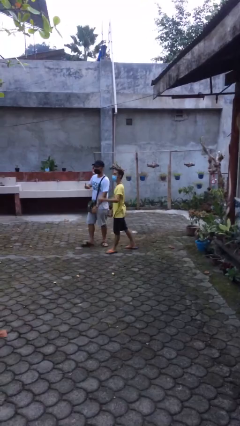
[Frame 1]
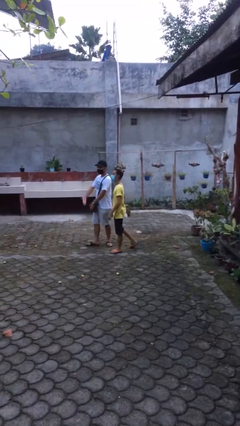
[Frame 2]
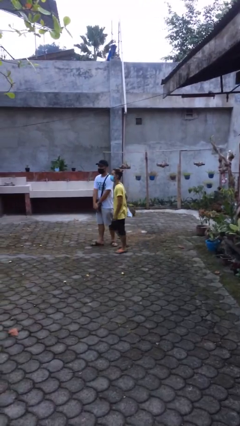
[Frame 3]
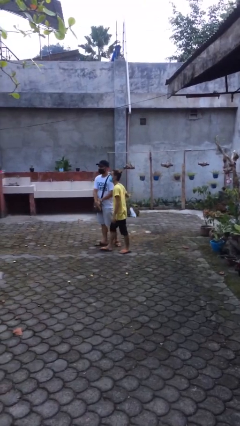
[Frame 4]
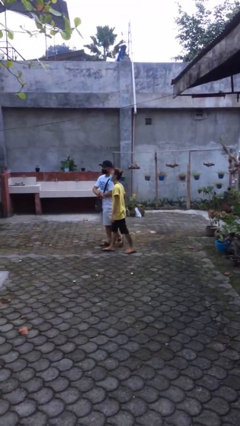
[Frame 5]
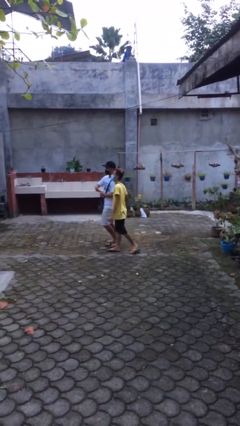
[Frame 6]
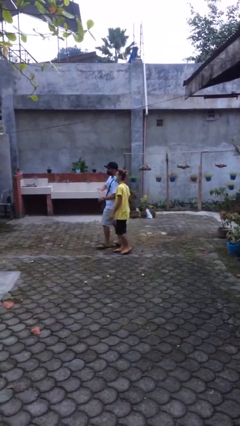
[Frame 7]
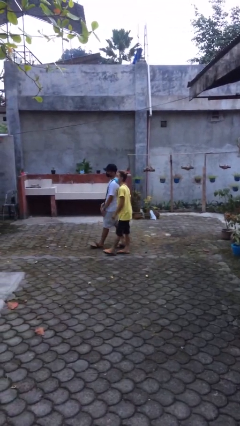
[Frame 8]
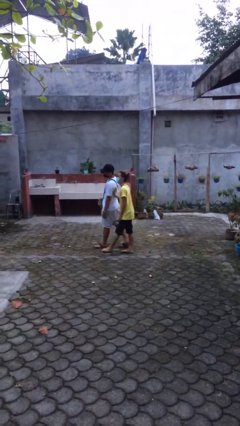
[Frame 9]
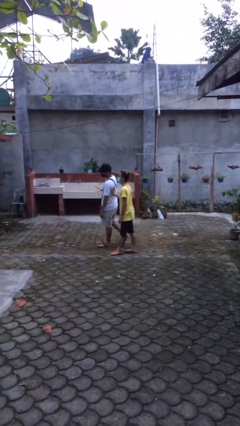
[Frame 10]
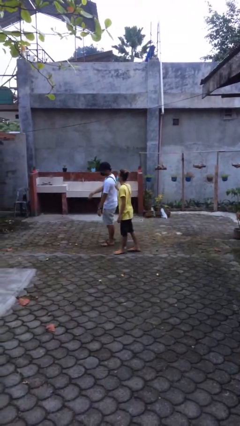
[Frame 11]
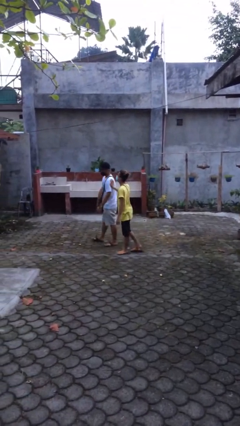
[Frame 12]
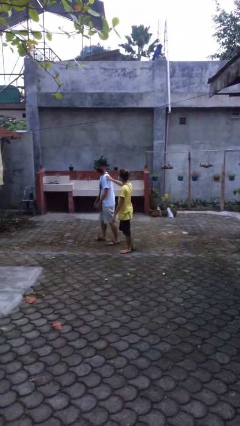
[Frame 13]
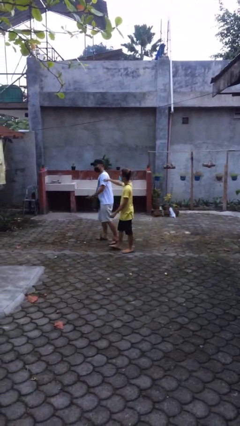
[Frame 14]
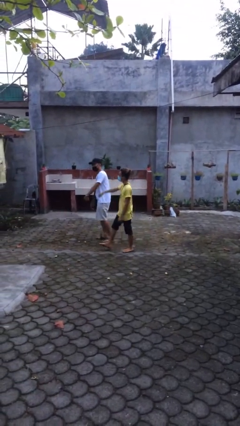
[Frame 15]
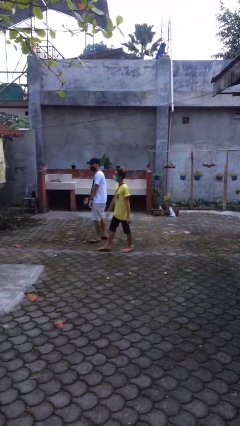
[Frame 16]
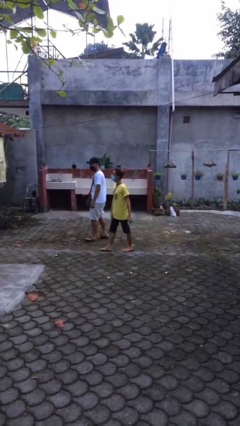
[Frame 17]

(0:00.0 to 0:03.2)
person talks to person

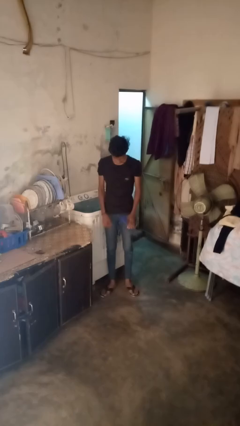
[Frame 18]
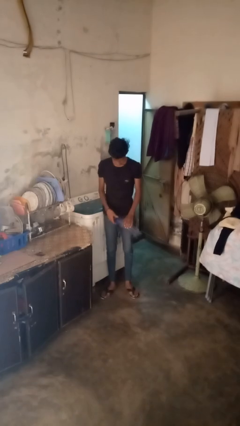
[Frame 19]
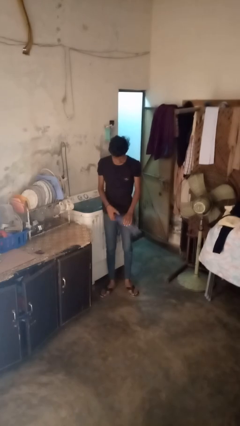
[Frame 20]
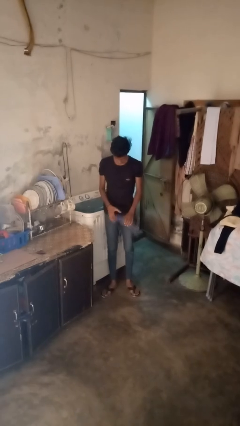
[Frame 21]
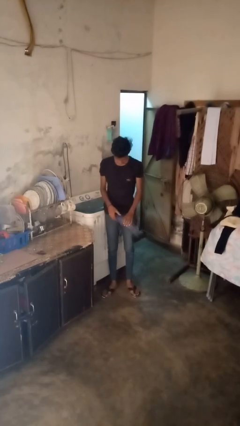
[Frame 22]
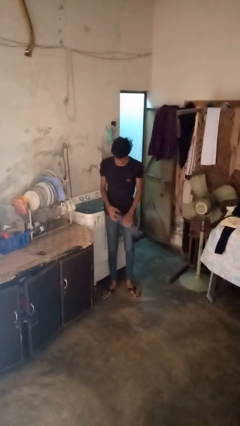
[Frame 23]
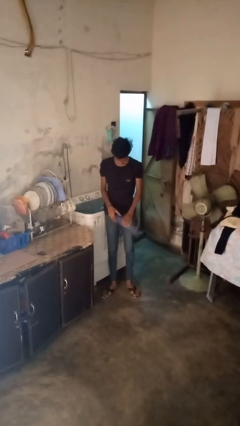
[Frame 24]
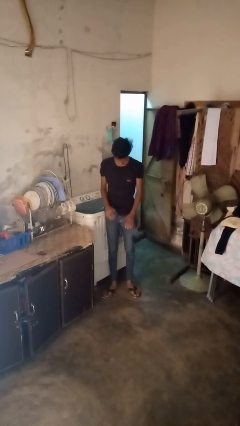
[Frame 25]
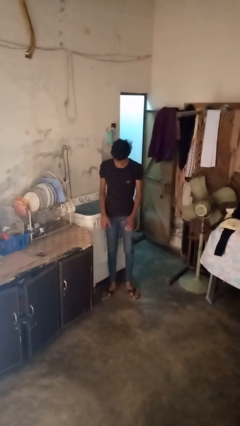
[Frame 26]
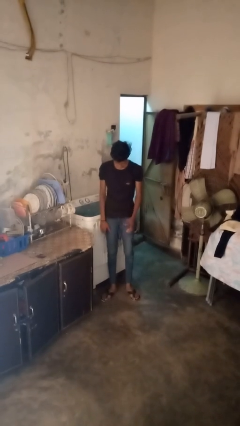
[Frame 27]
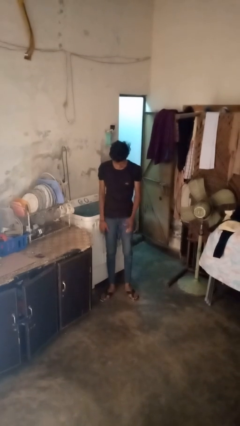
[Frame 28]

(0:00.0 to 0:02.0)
person unscrews lid from bottle

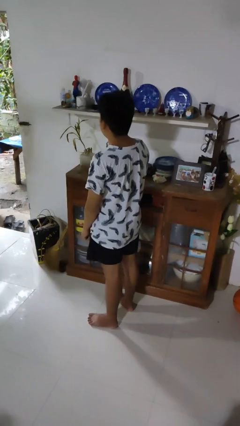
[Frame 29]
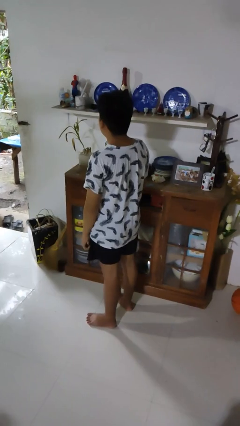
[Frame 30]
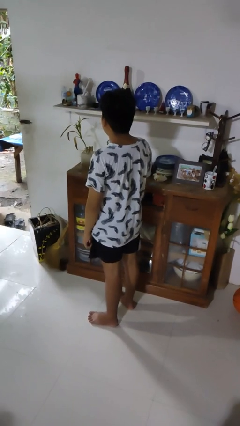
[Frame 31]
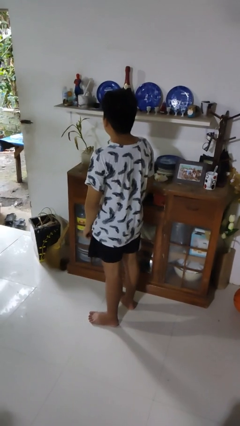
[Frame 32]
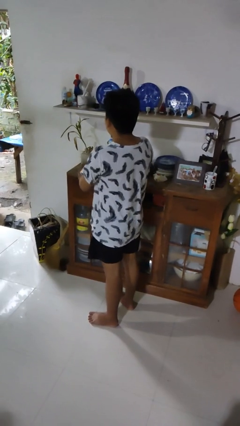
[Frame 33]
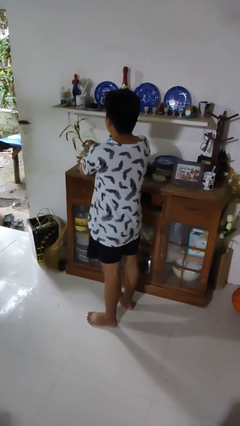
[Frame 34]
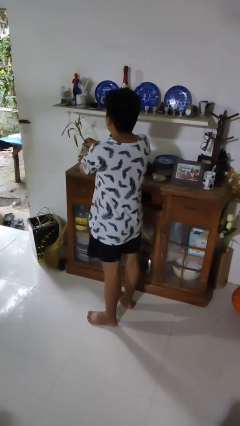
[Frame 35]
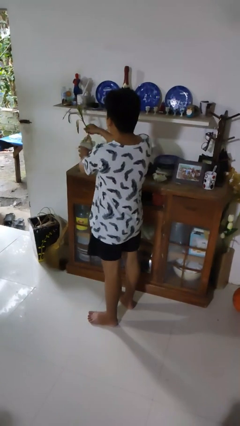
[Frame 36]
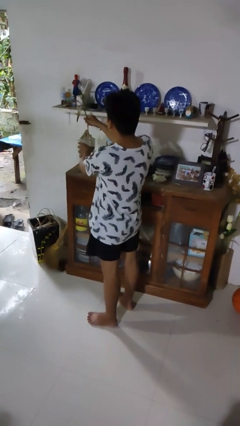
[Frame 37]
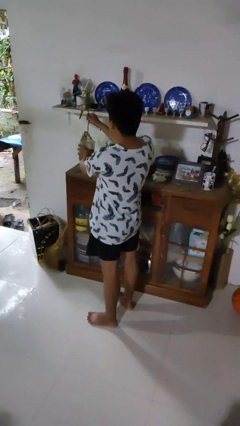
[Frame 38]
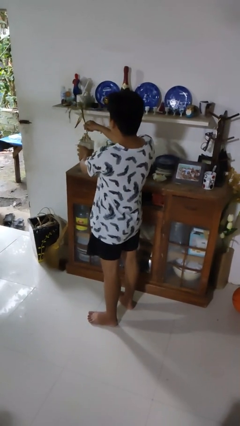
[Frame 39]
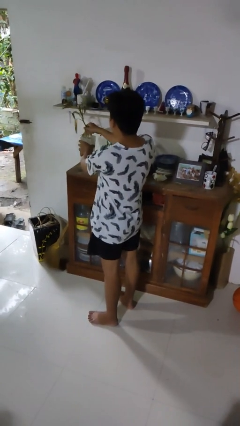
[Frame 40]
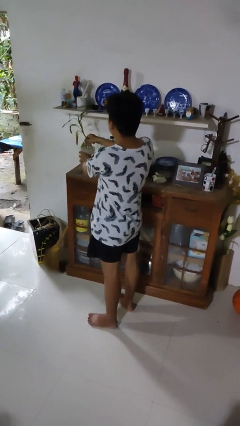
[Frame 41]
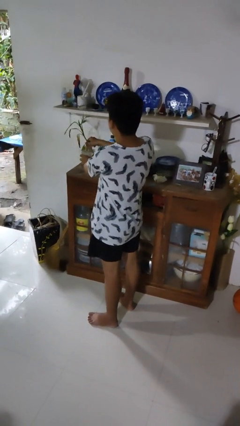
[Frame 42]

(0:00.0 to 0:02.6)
person arranges flowers in vase

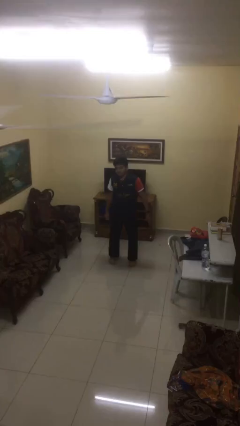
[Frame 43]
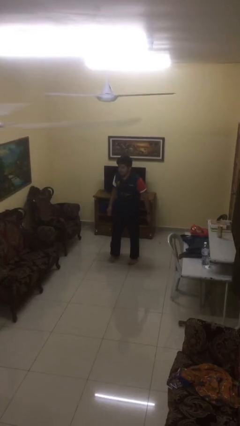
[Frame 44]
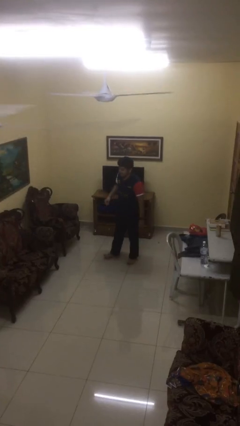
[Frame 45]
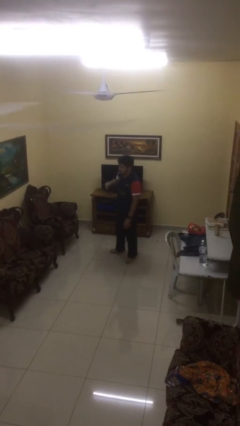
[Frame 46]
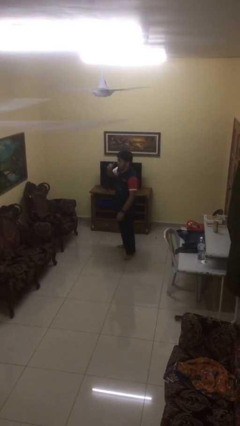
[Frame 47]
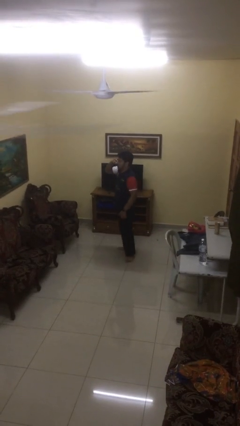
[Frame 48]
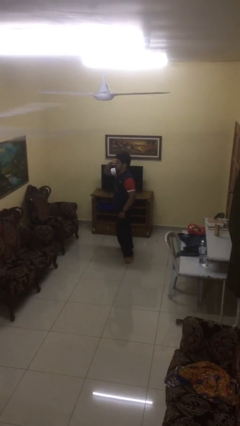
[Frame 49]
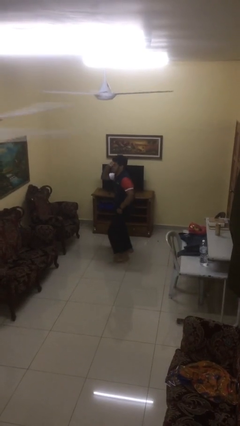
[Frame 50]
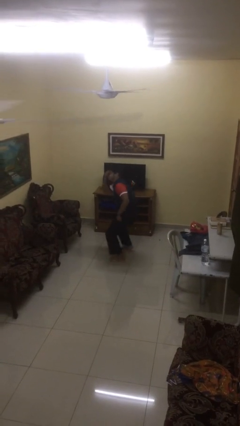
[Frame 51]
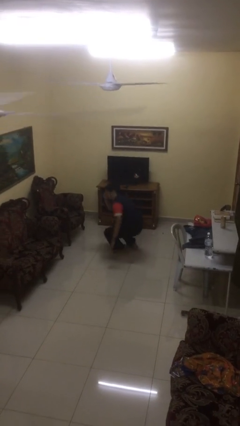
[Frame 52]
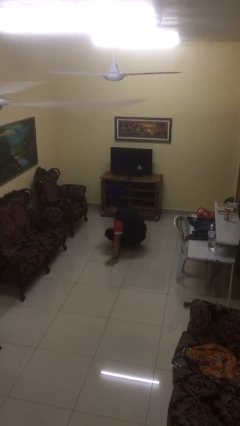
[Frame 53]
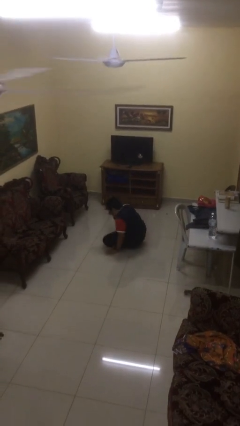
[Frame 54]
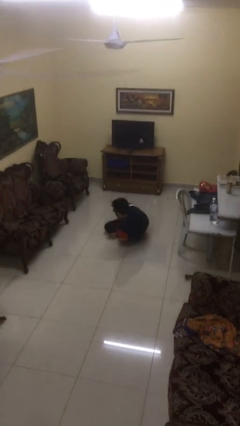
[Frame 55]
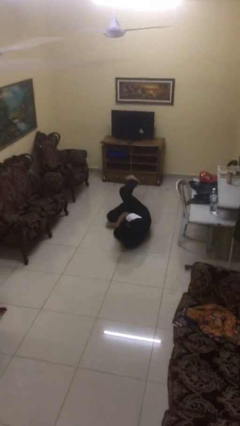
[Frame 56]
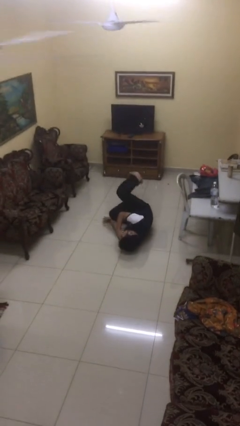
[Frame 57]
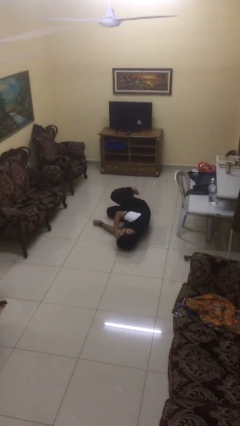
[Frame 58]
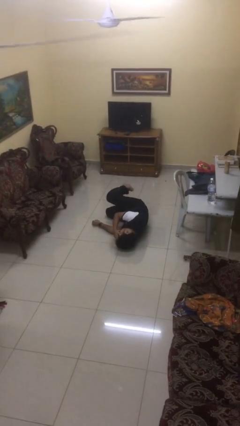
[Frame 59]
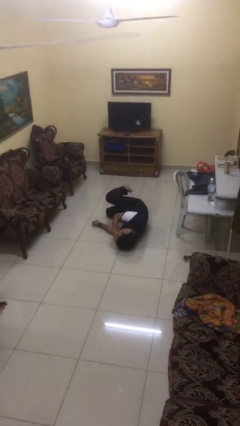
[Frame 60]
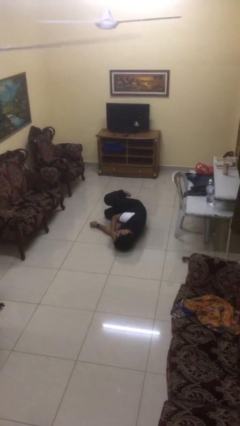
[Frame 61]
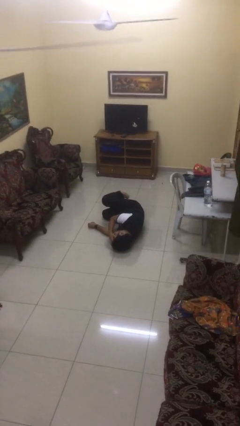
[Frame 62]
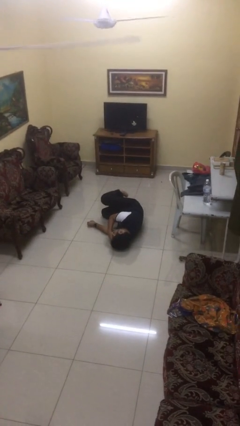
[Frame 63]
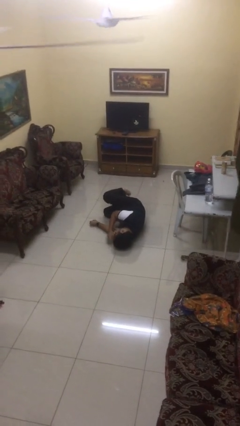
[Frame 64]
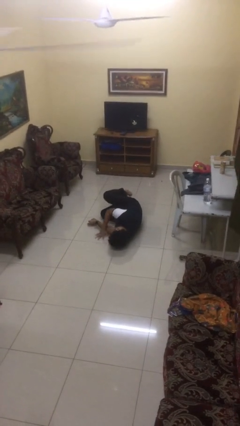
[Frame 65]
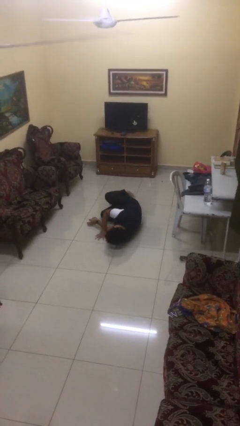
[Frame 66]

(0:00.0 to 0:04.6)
person falls while standing

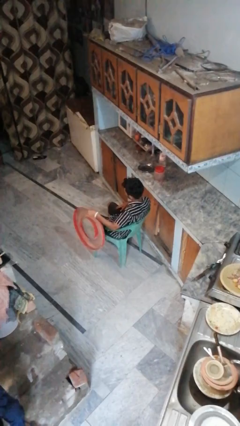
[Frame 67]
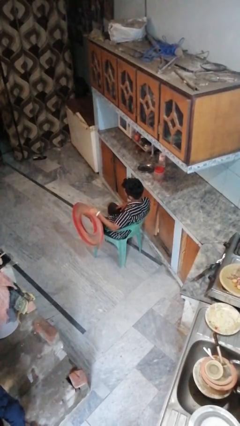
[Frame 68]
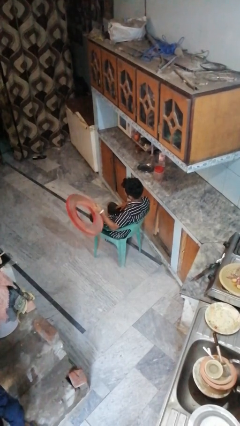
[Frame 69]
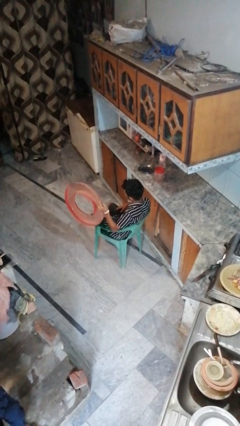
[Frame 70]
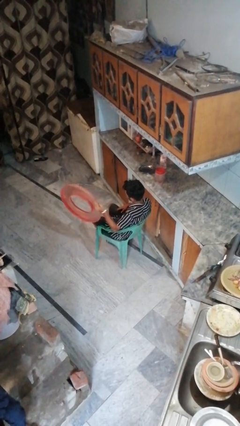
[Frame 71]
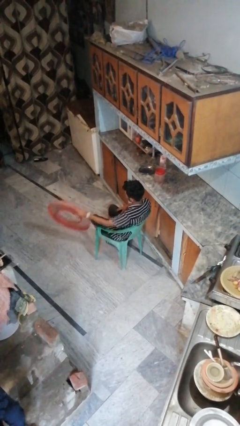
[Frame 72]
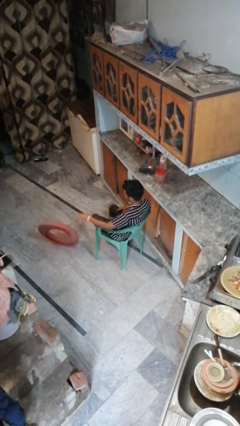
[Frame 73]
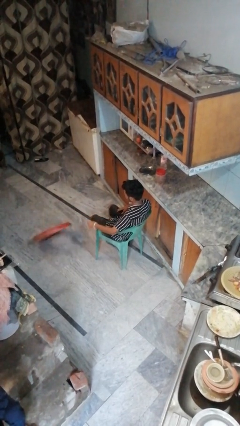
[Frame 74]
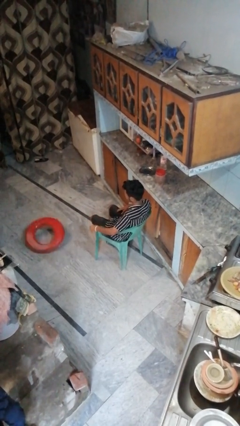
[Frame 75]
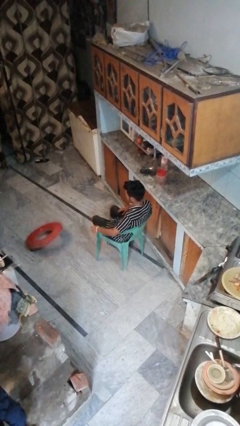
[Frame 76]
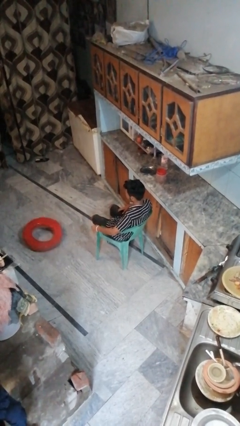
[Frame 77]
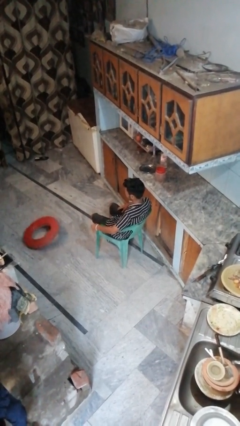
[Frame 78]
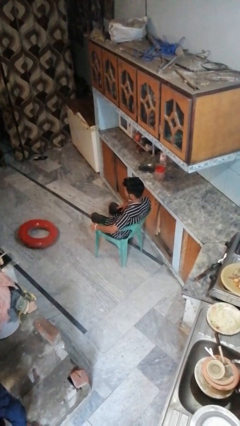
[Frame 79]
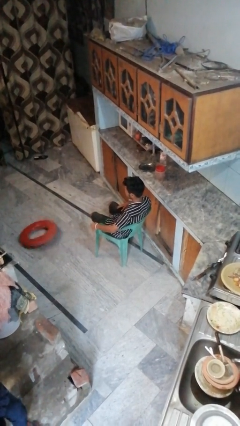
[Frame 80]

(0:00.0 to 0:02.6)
person throws object to ground

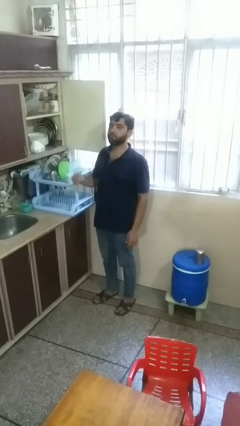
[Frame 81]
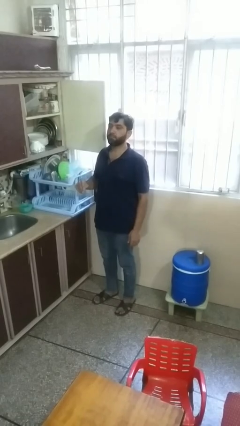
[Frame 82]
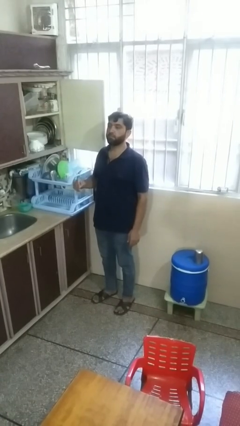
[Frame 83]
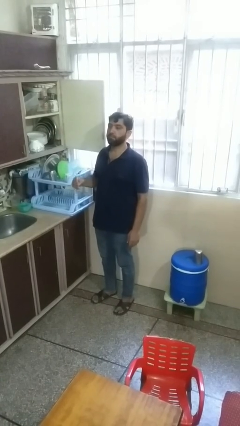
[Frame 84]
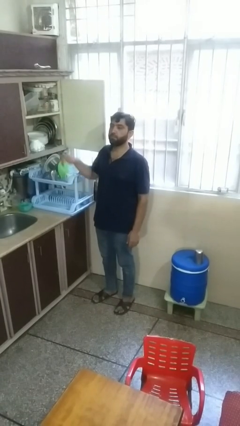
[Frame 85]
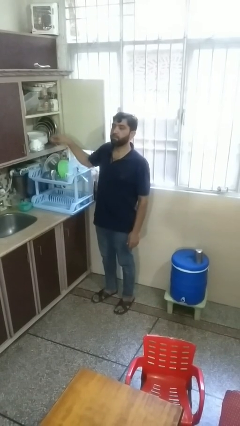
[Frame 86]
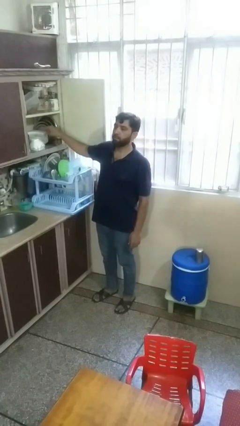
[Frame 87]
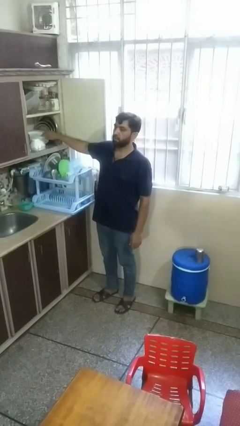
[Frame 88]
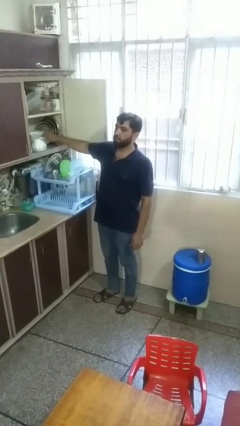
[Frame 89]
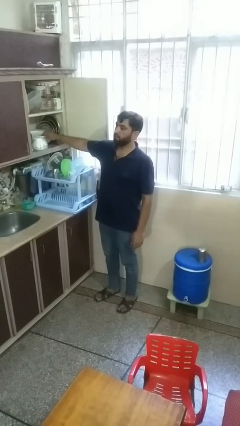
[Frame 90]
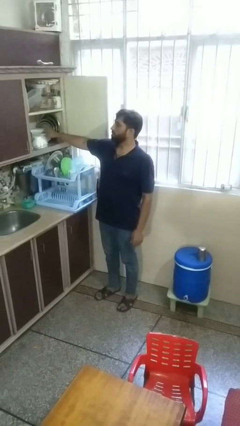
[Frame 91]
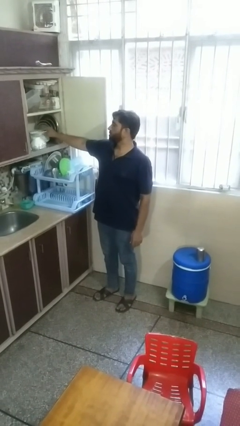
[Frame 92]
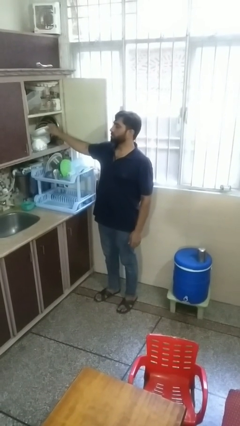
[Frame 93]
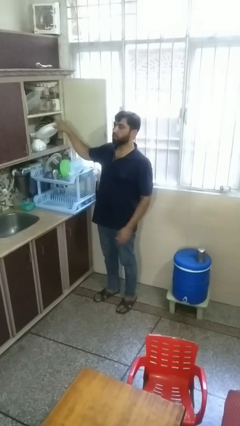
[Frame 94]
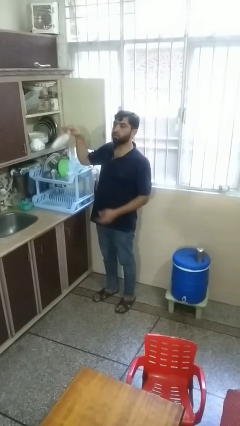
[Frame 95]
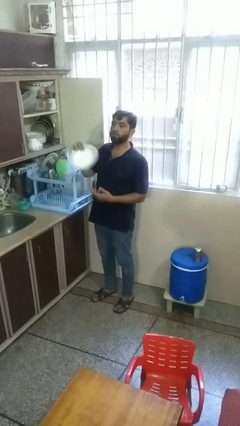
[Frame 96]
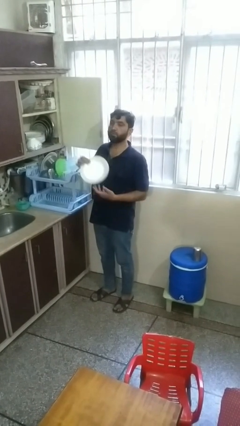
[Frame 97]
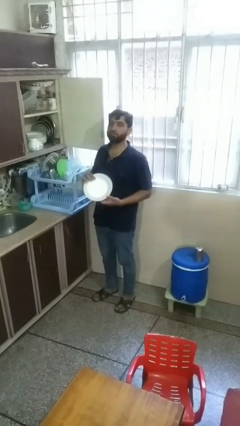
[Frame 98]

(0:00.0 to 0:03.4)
person takes object from cabinet
